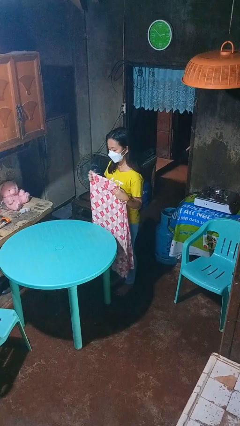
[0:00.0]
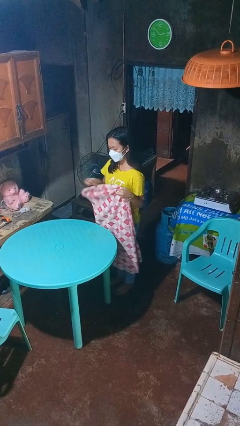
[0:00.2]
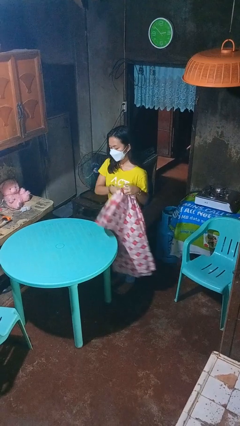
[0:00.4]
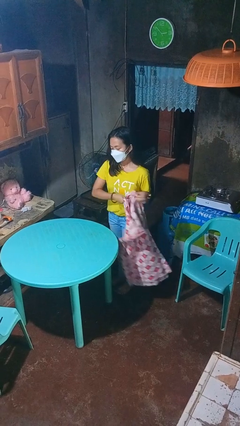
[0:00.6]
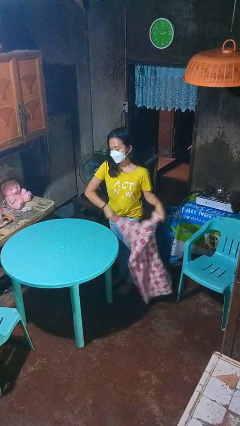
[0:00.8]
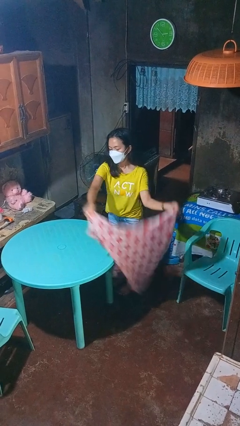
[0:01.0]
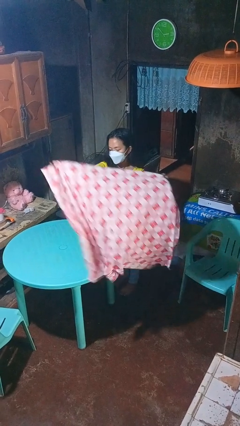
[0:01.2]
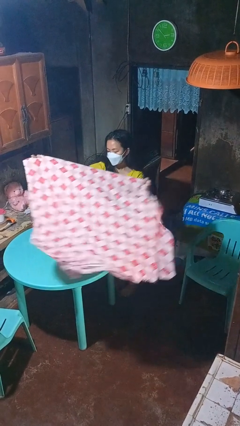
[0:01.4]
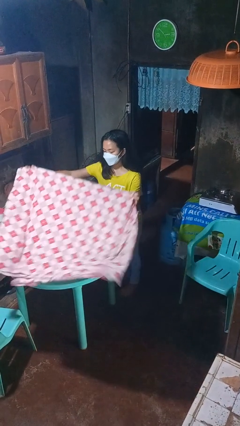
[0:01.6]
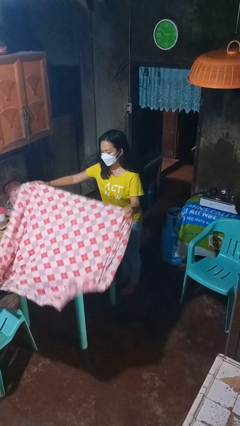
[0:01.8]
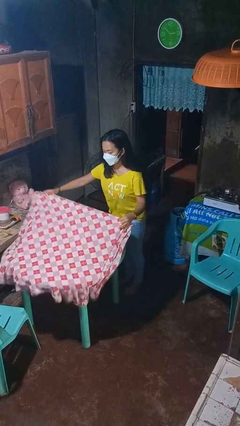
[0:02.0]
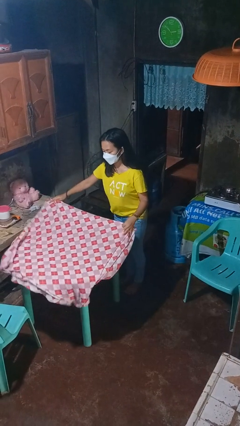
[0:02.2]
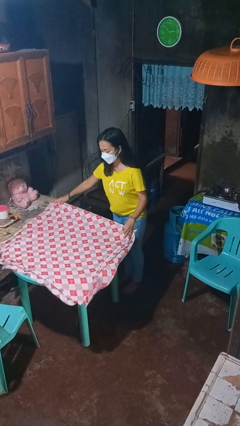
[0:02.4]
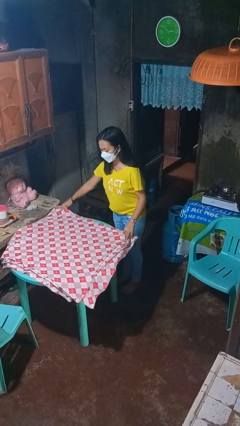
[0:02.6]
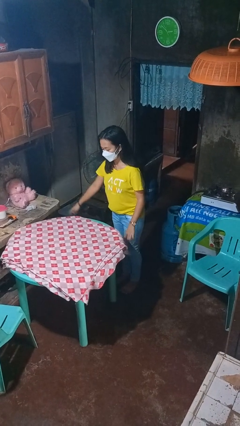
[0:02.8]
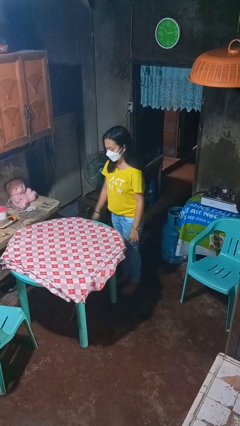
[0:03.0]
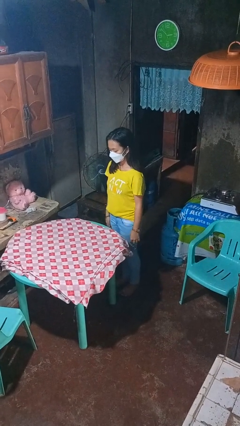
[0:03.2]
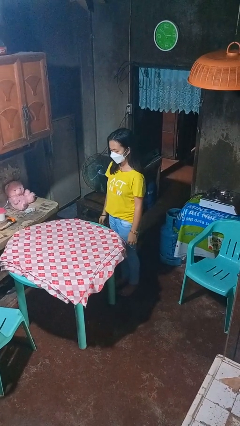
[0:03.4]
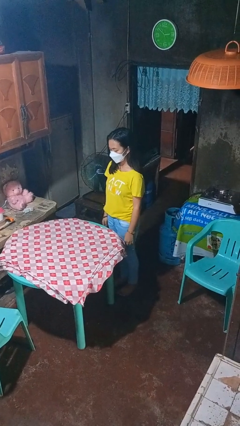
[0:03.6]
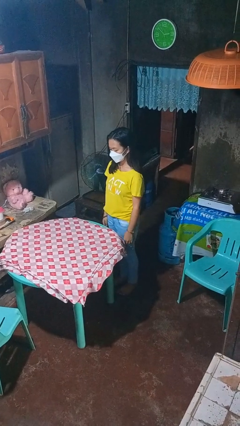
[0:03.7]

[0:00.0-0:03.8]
person spreads tablecloth

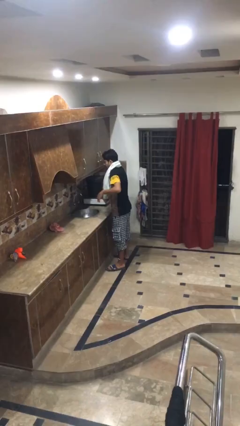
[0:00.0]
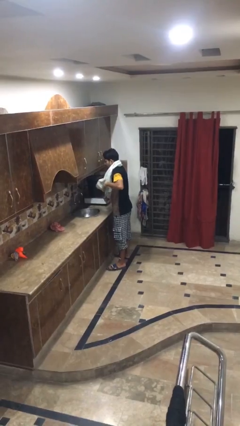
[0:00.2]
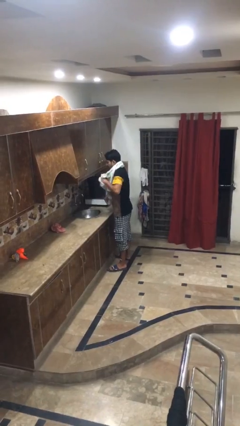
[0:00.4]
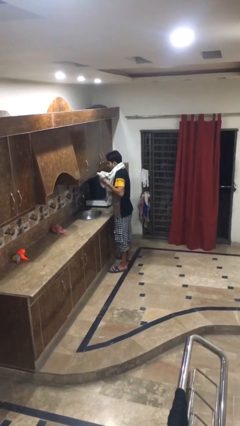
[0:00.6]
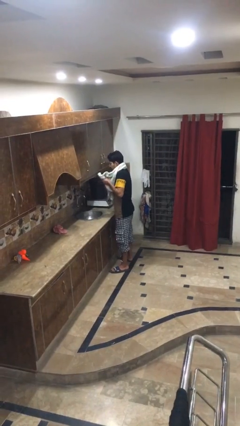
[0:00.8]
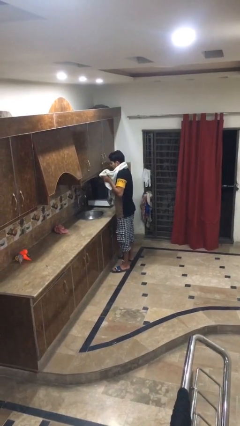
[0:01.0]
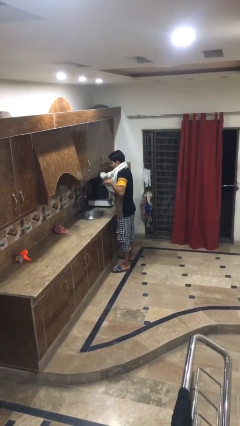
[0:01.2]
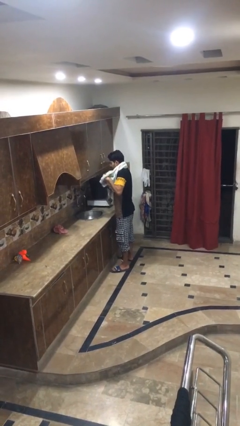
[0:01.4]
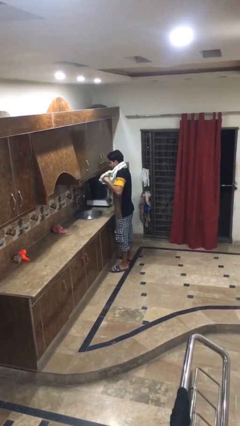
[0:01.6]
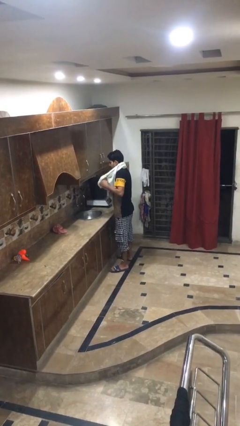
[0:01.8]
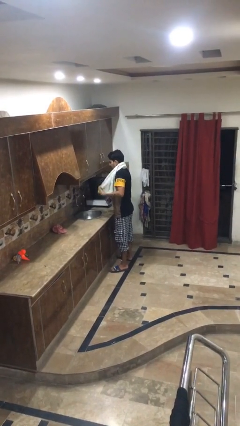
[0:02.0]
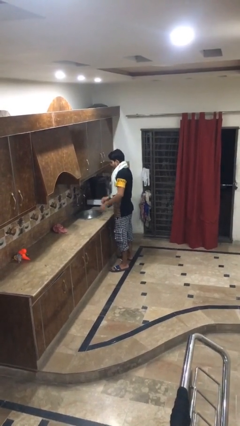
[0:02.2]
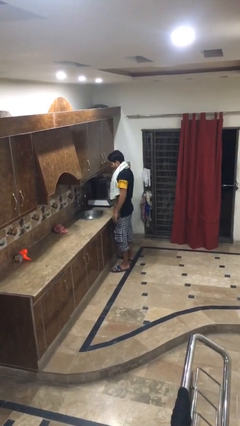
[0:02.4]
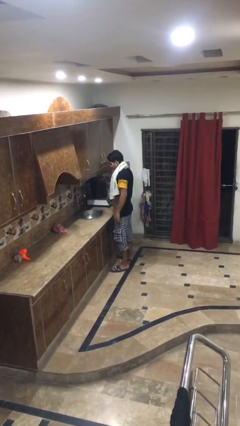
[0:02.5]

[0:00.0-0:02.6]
person dries hands with towel

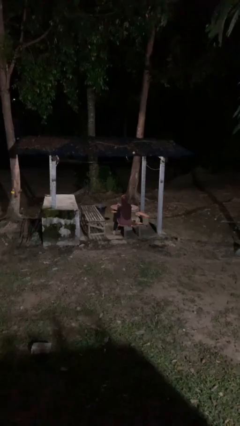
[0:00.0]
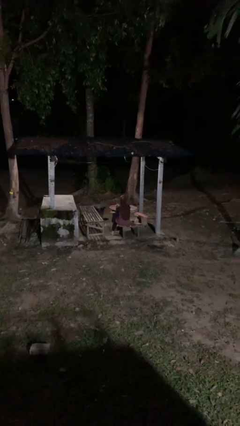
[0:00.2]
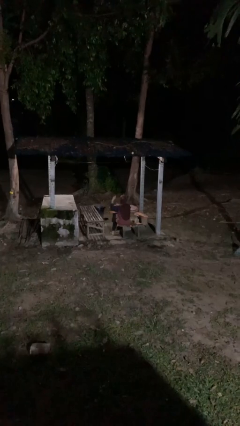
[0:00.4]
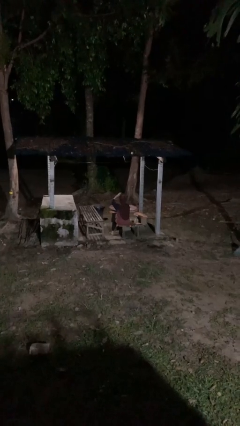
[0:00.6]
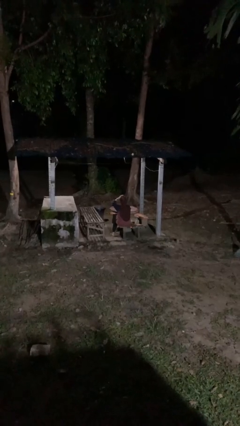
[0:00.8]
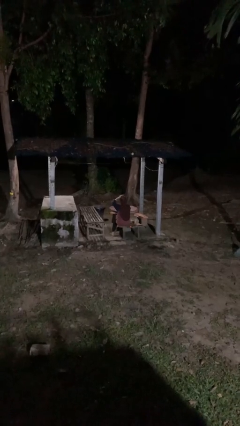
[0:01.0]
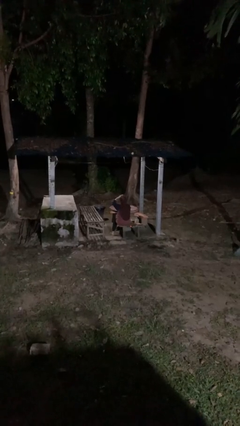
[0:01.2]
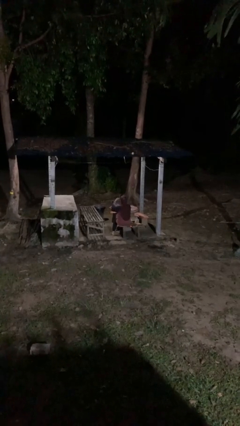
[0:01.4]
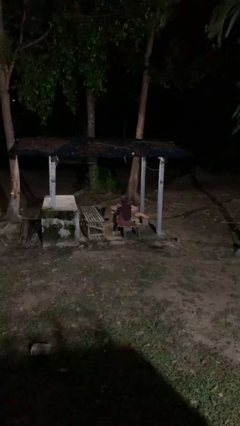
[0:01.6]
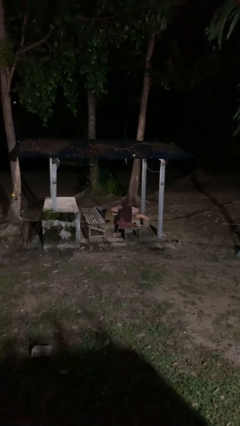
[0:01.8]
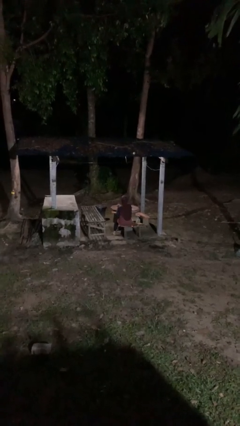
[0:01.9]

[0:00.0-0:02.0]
person pats head

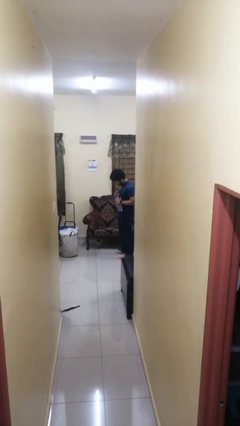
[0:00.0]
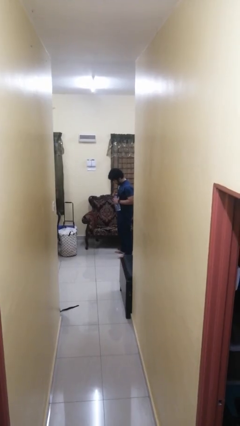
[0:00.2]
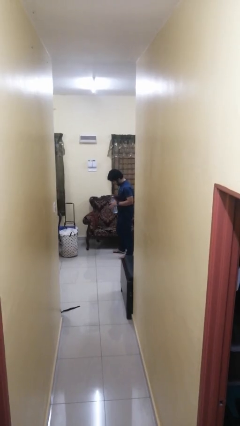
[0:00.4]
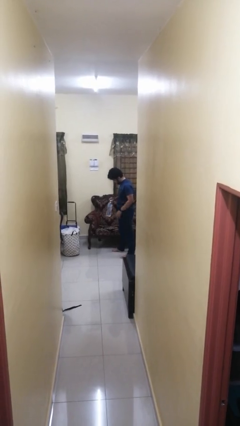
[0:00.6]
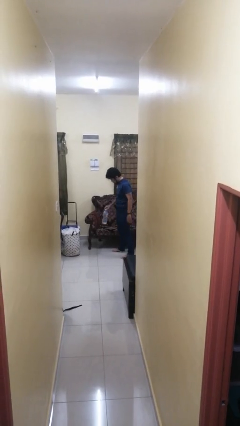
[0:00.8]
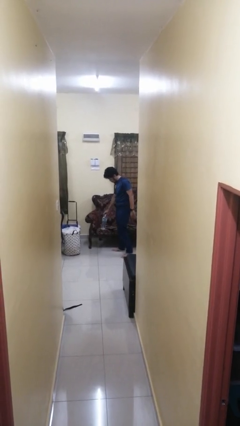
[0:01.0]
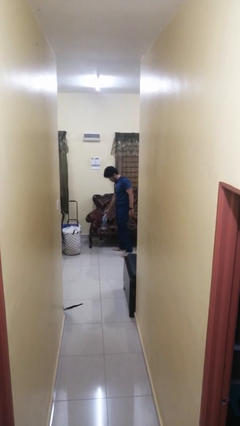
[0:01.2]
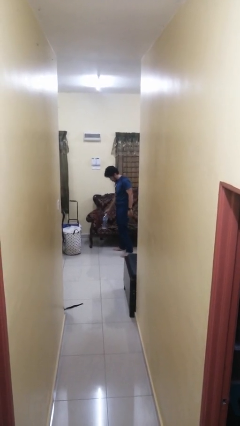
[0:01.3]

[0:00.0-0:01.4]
person puts down object on couch

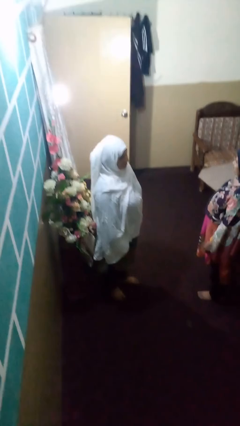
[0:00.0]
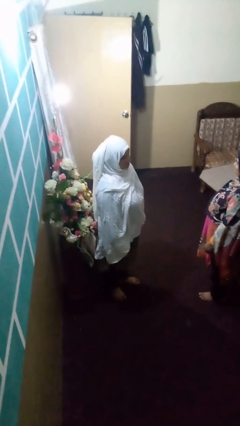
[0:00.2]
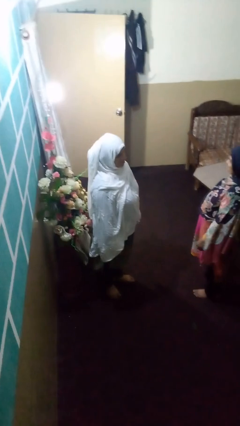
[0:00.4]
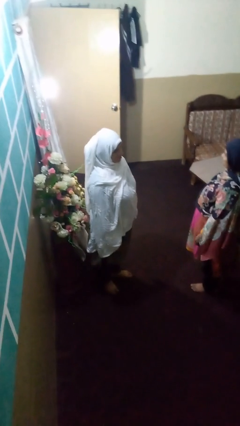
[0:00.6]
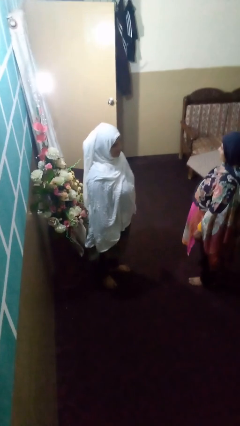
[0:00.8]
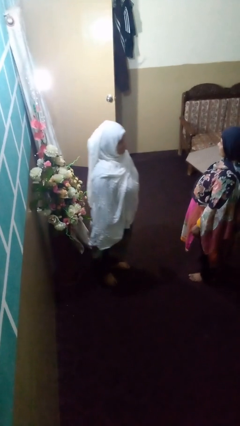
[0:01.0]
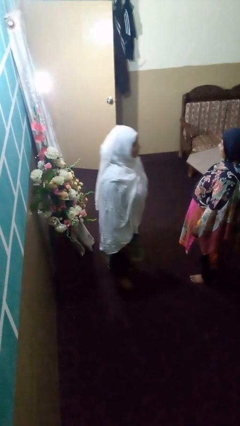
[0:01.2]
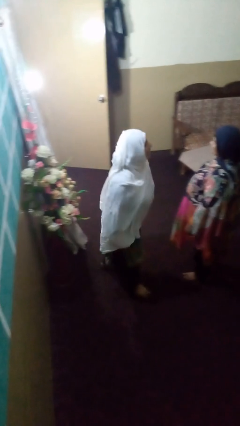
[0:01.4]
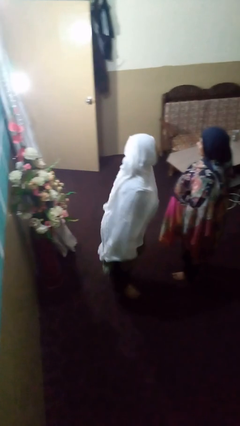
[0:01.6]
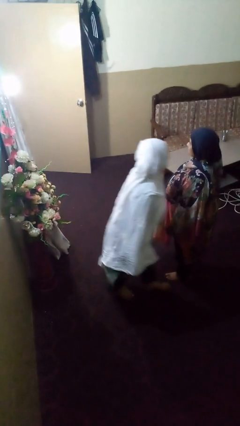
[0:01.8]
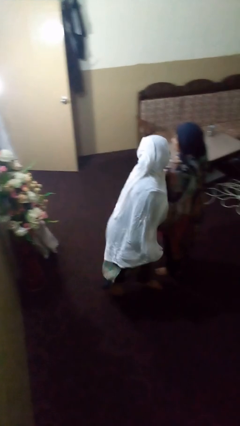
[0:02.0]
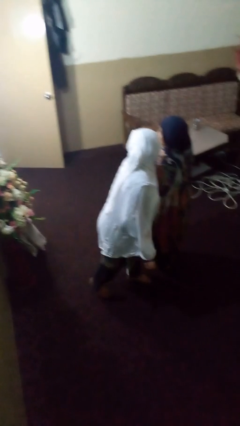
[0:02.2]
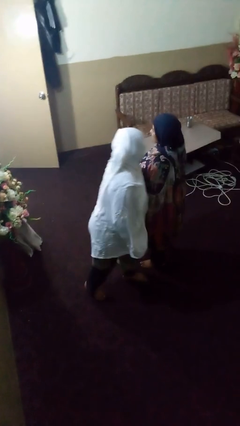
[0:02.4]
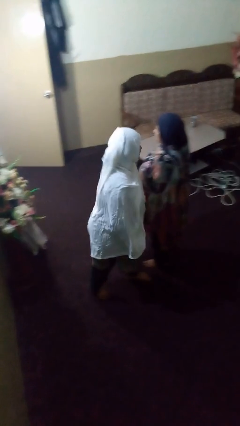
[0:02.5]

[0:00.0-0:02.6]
person laughs with person

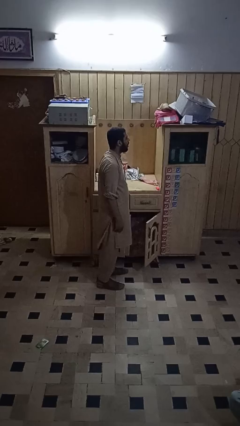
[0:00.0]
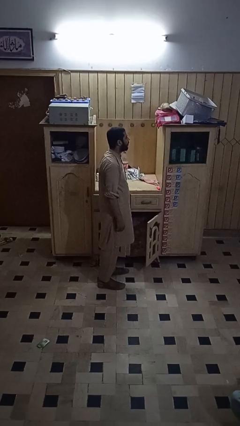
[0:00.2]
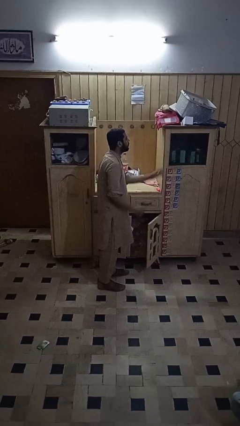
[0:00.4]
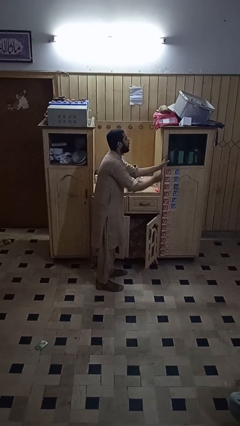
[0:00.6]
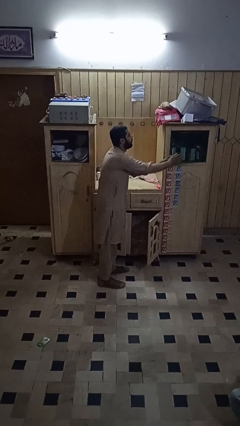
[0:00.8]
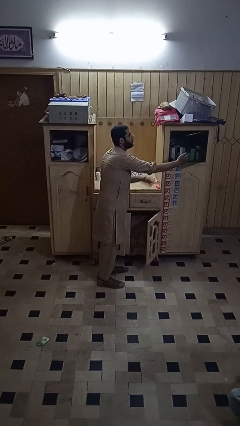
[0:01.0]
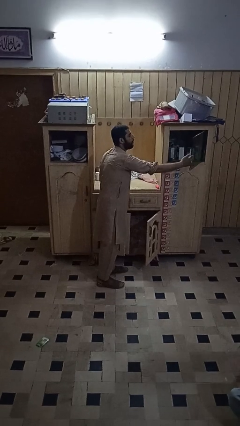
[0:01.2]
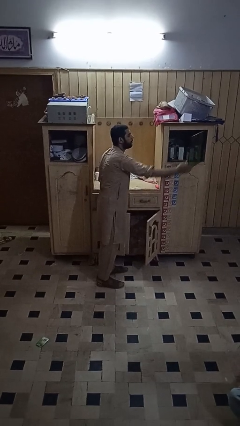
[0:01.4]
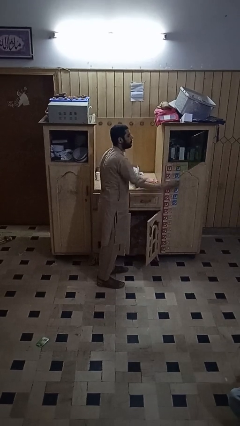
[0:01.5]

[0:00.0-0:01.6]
person closes cabinet

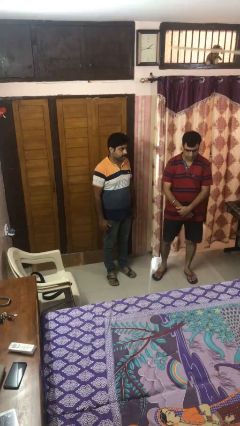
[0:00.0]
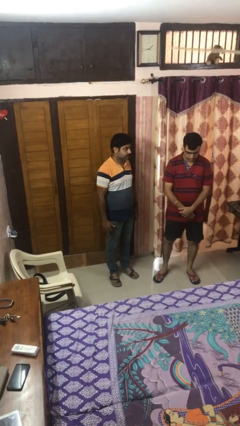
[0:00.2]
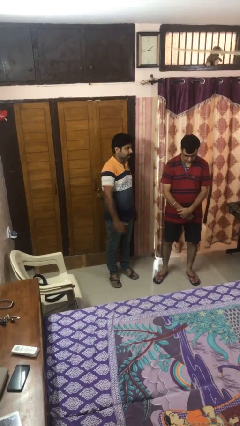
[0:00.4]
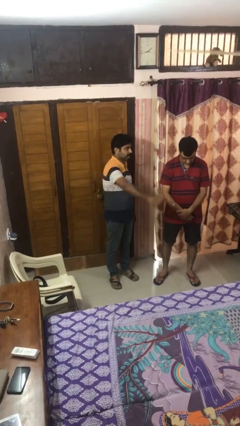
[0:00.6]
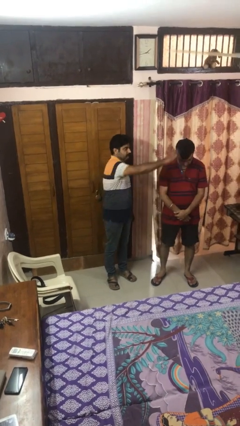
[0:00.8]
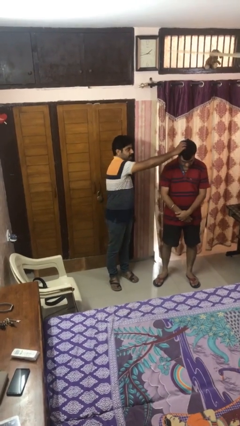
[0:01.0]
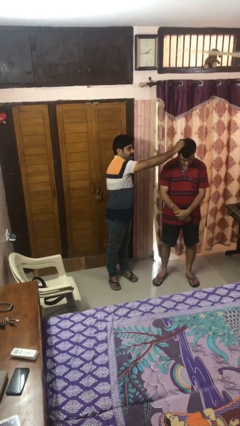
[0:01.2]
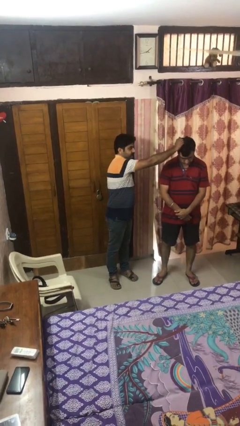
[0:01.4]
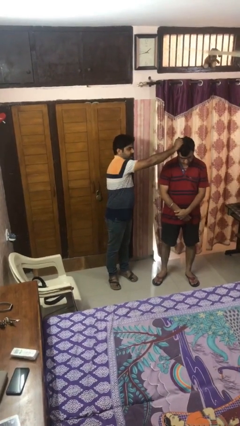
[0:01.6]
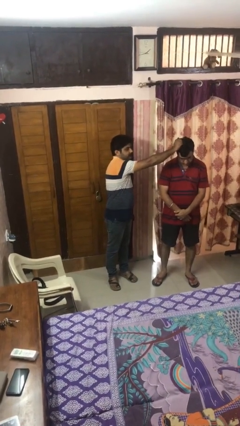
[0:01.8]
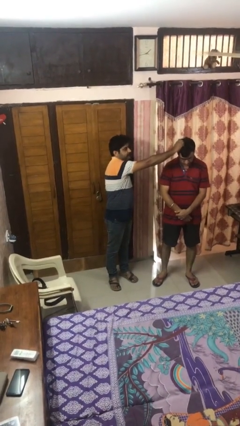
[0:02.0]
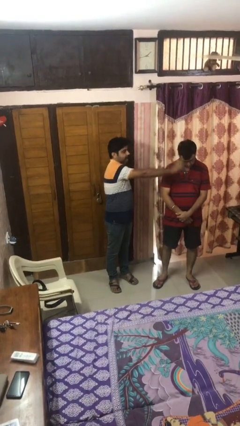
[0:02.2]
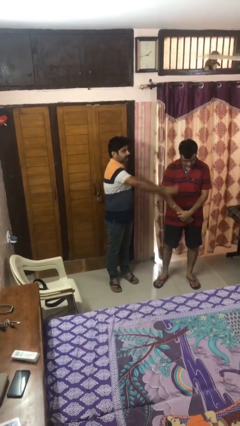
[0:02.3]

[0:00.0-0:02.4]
person grabs person by hair

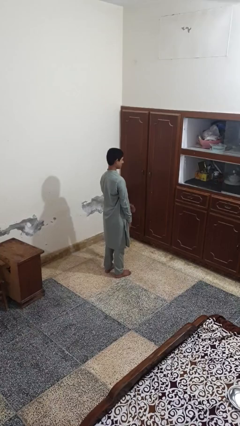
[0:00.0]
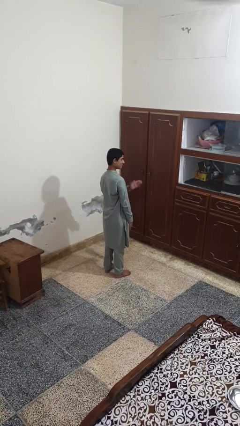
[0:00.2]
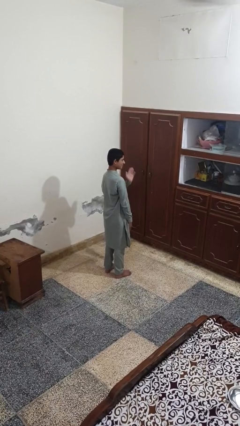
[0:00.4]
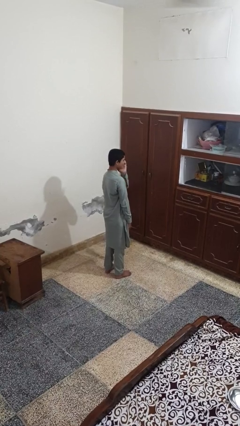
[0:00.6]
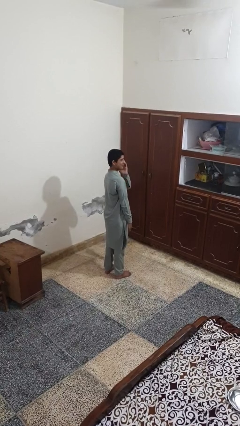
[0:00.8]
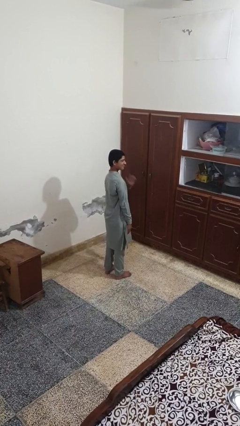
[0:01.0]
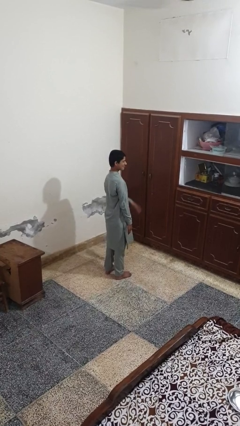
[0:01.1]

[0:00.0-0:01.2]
person swats bug
